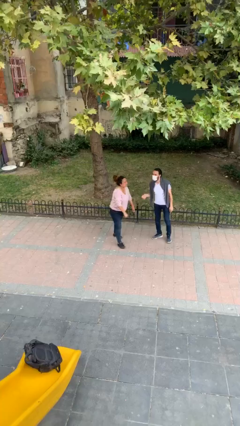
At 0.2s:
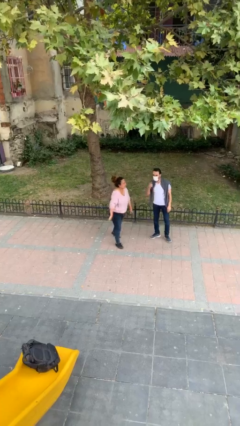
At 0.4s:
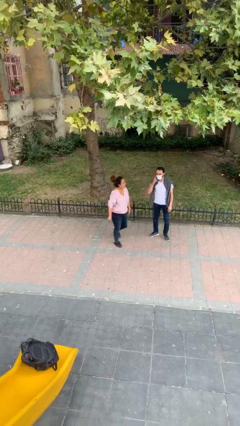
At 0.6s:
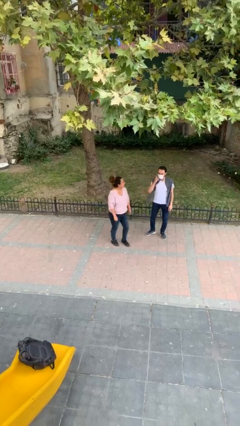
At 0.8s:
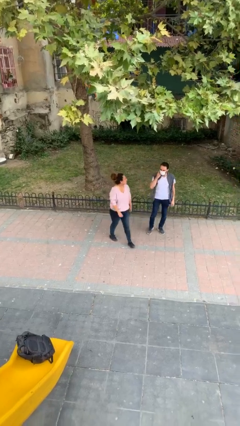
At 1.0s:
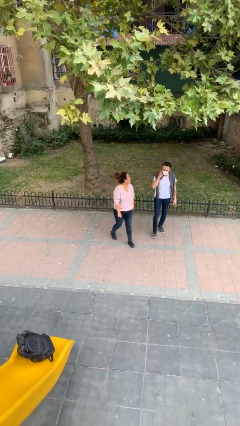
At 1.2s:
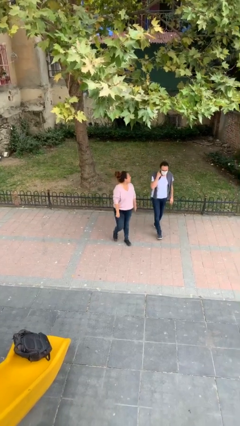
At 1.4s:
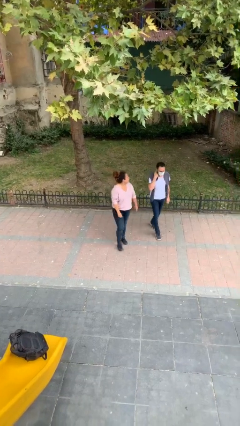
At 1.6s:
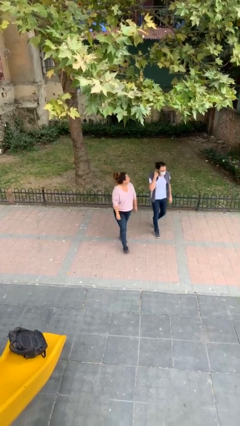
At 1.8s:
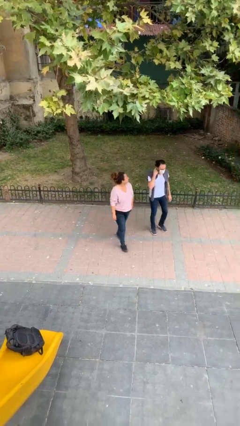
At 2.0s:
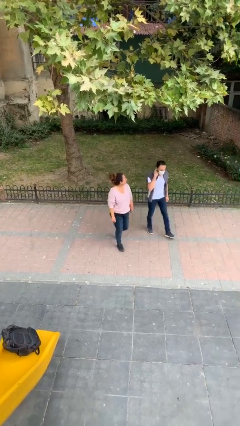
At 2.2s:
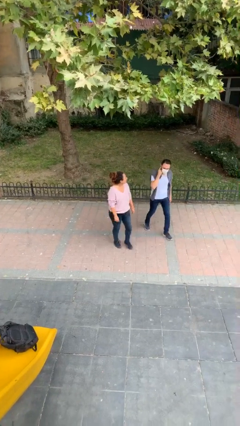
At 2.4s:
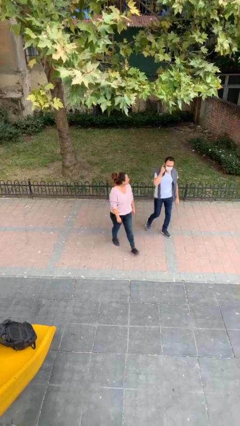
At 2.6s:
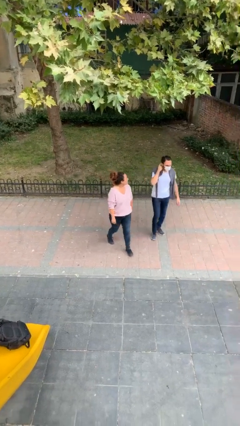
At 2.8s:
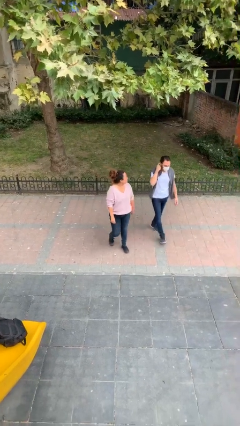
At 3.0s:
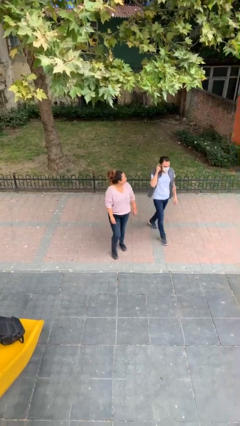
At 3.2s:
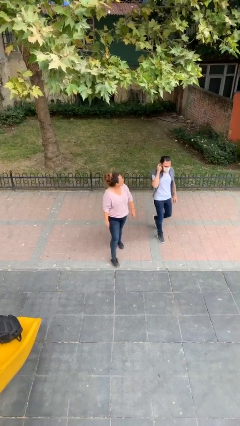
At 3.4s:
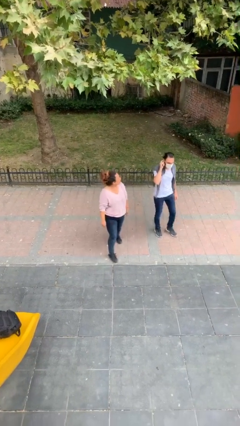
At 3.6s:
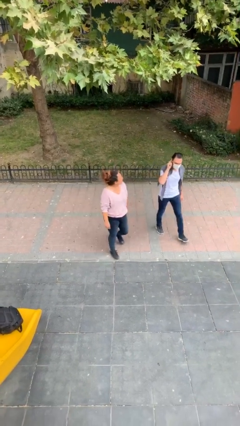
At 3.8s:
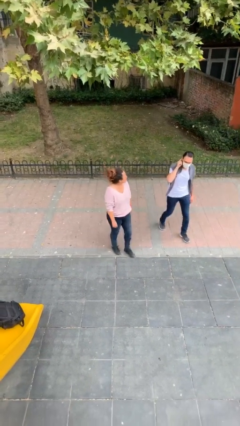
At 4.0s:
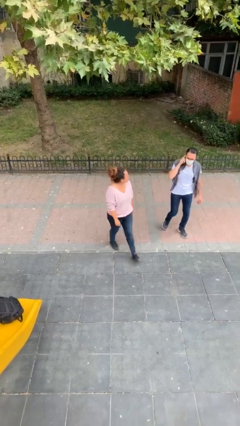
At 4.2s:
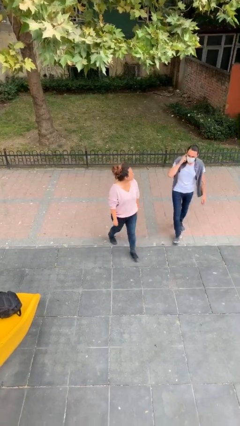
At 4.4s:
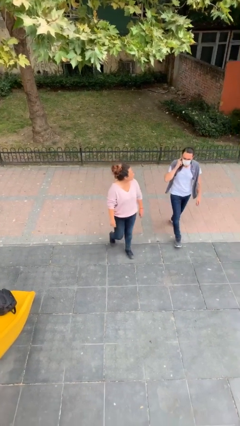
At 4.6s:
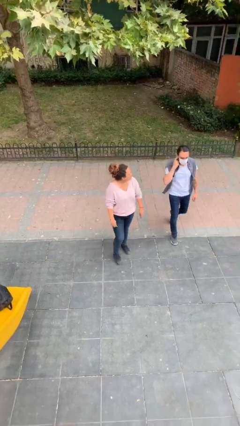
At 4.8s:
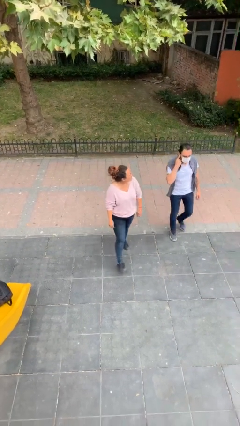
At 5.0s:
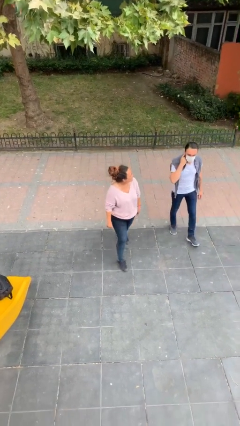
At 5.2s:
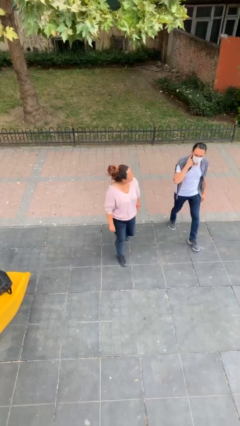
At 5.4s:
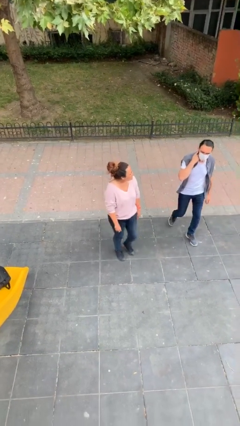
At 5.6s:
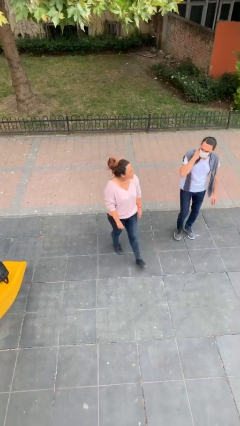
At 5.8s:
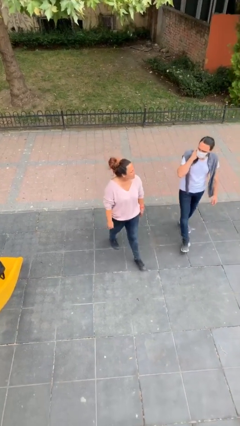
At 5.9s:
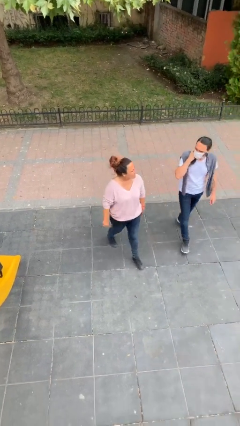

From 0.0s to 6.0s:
person talks to person

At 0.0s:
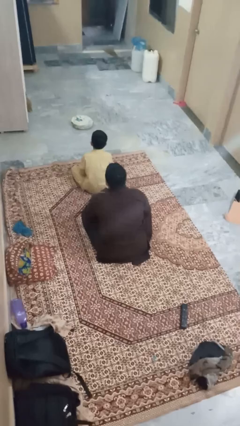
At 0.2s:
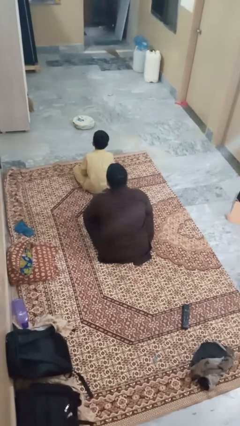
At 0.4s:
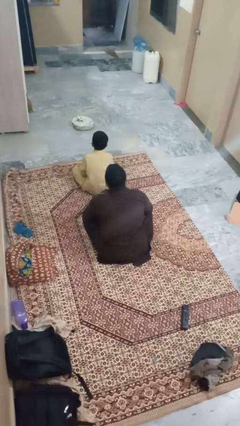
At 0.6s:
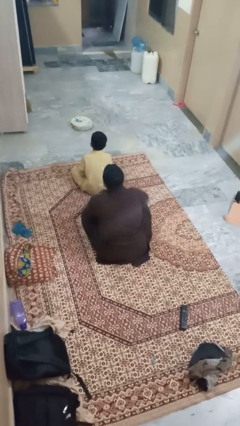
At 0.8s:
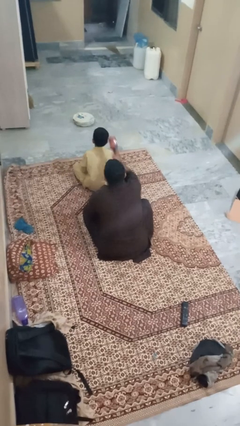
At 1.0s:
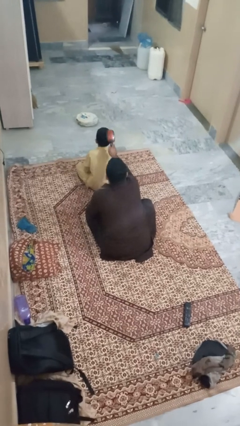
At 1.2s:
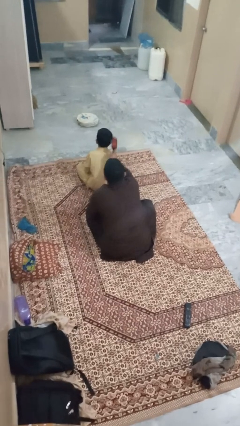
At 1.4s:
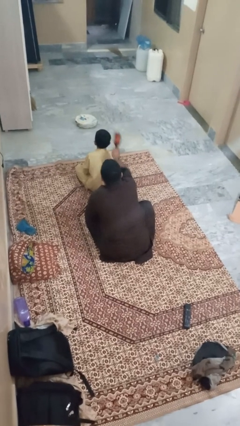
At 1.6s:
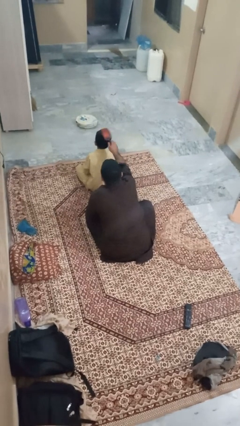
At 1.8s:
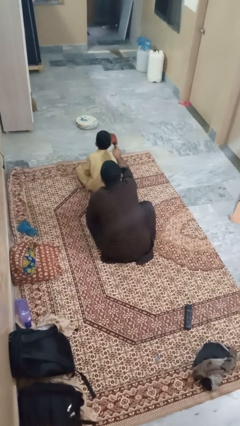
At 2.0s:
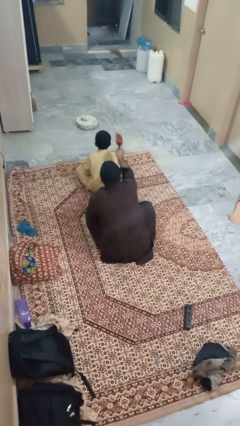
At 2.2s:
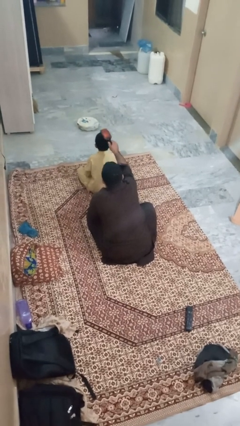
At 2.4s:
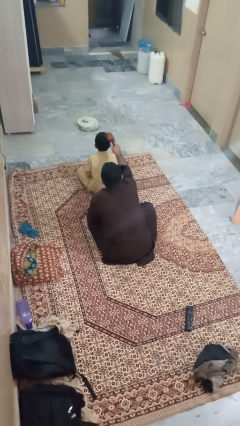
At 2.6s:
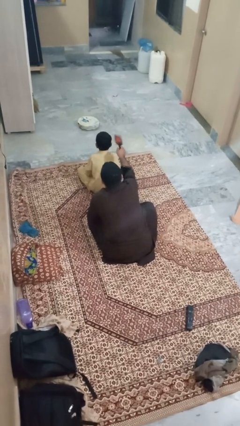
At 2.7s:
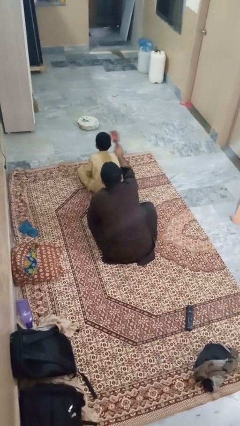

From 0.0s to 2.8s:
person brushes hair of person

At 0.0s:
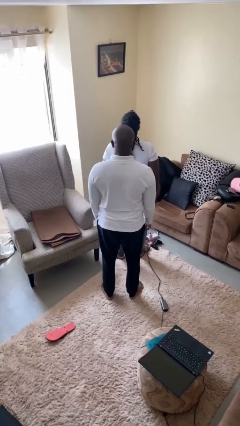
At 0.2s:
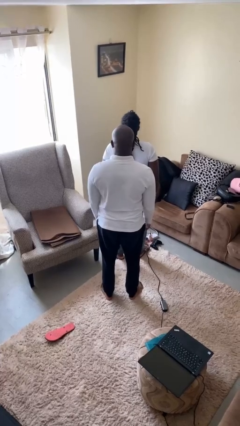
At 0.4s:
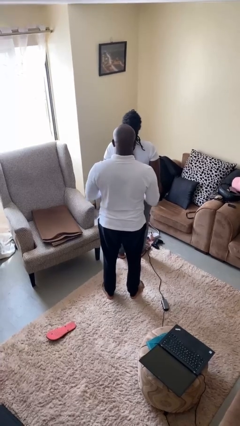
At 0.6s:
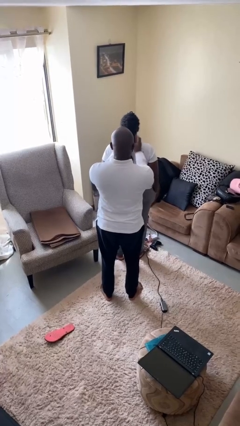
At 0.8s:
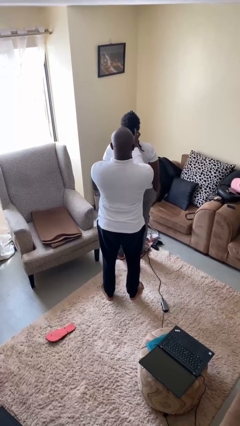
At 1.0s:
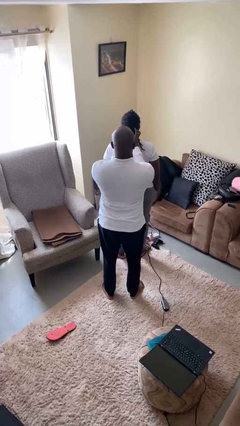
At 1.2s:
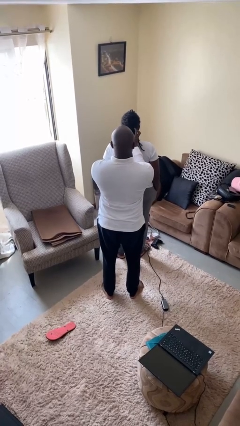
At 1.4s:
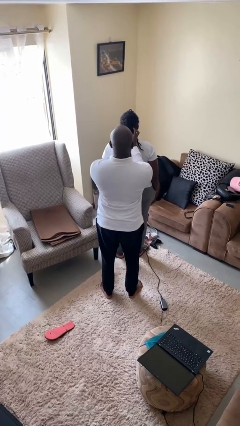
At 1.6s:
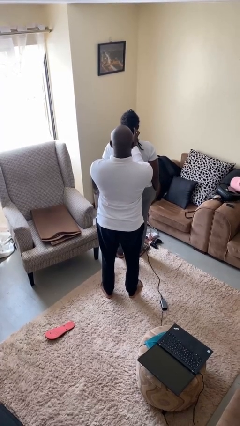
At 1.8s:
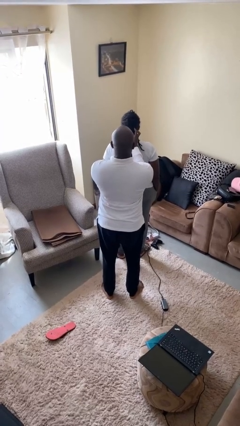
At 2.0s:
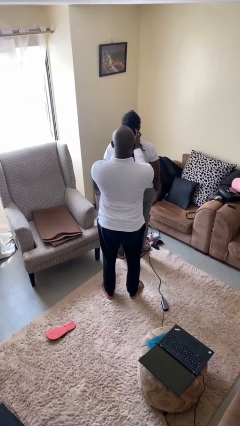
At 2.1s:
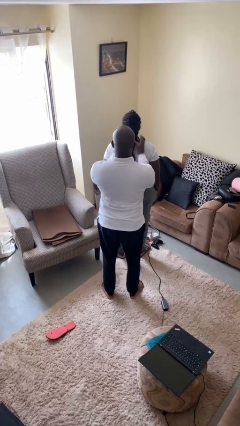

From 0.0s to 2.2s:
person grabs person by hair

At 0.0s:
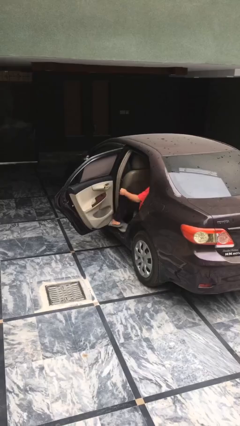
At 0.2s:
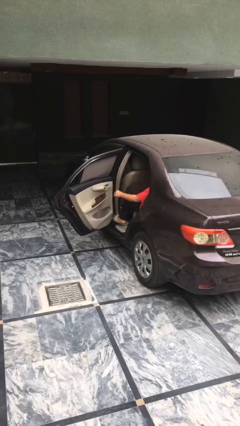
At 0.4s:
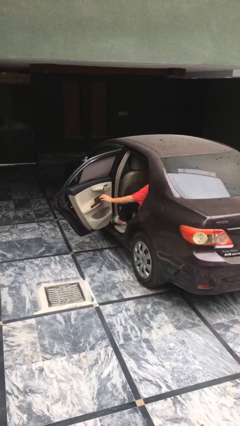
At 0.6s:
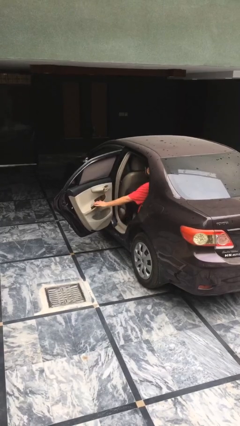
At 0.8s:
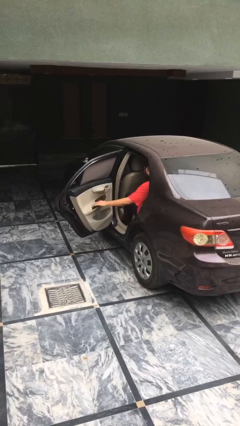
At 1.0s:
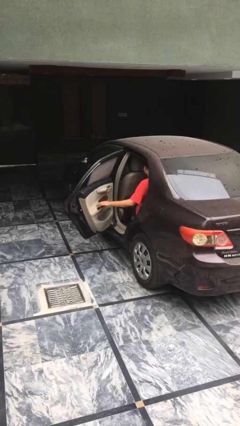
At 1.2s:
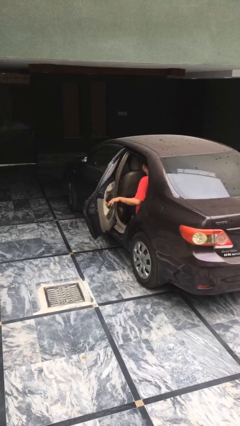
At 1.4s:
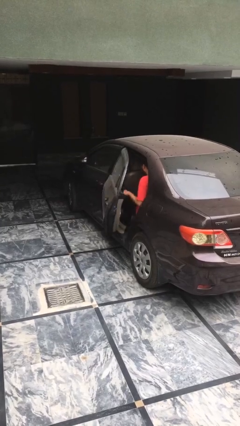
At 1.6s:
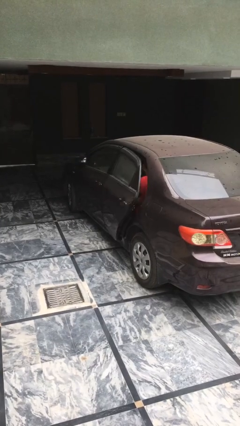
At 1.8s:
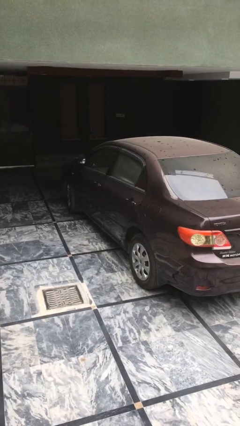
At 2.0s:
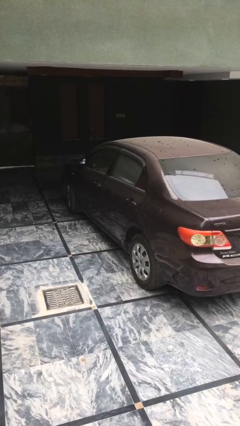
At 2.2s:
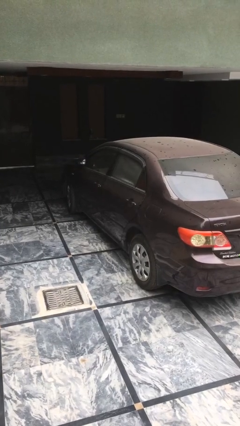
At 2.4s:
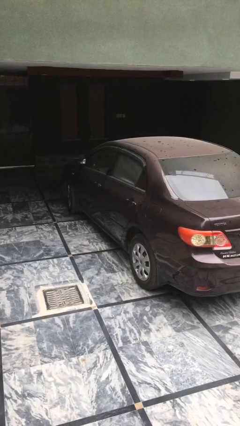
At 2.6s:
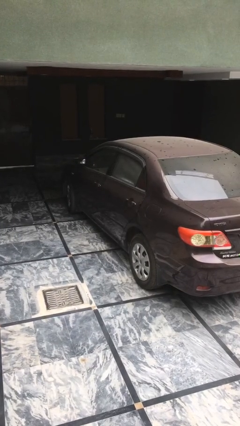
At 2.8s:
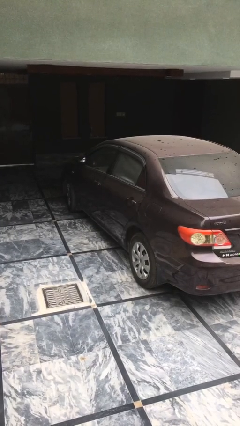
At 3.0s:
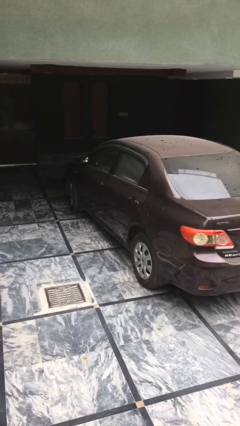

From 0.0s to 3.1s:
person closes car door

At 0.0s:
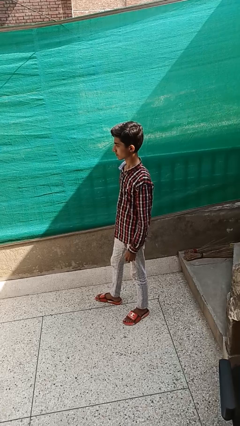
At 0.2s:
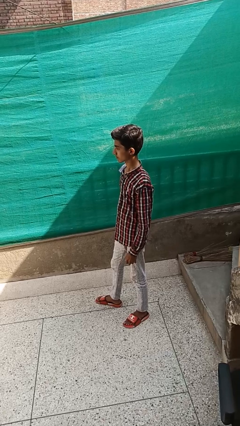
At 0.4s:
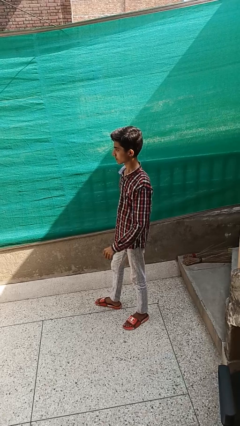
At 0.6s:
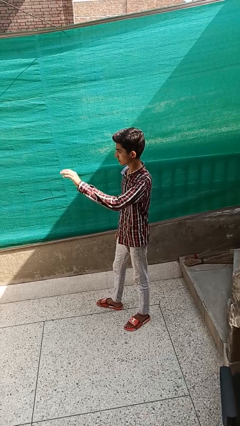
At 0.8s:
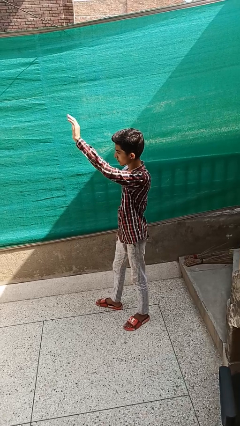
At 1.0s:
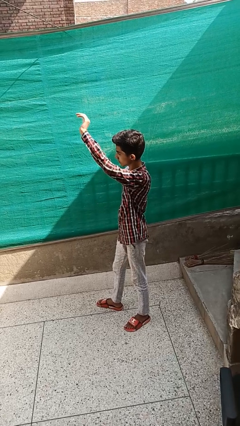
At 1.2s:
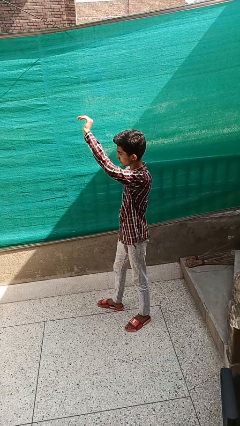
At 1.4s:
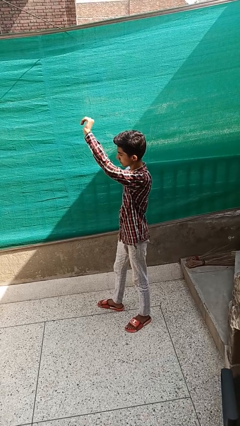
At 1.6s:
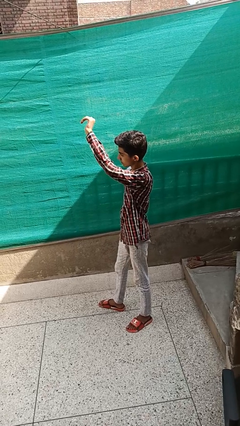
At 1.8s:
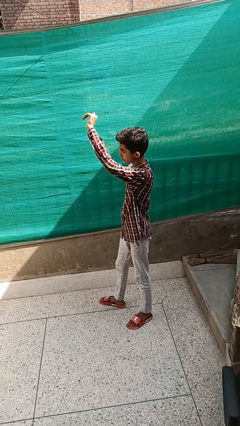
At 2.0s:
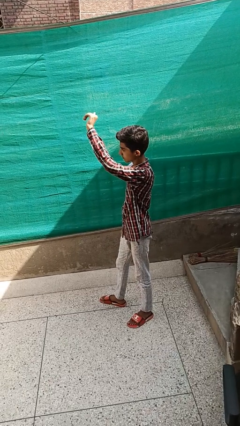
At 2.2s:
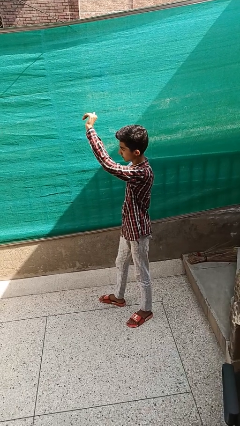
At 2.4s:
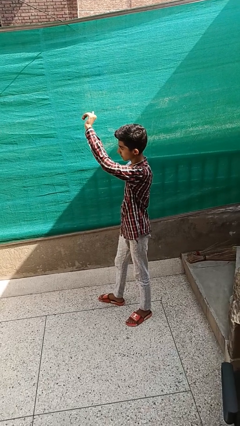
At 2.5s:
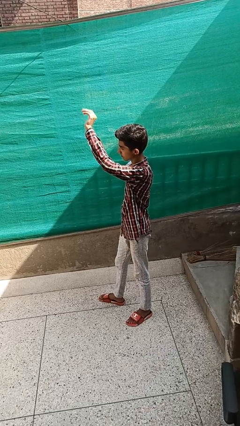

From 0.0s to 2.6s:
person gestures come here

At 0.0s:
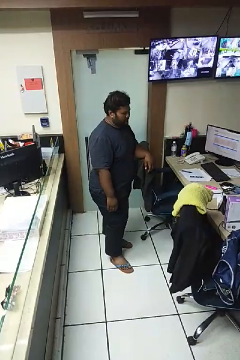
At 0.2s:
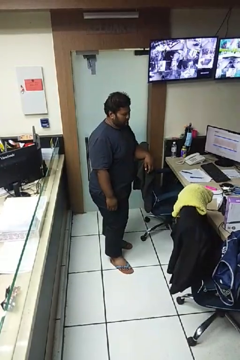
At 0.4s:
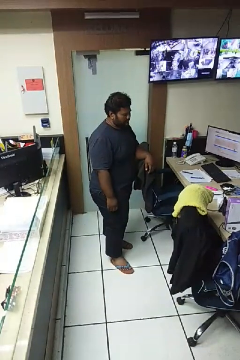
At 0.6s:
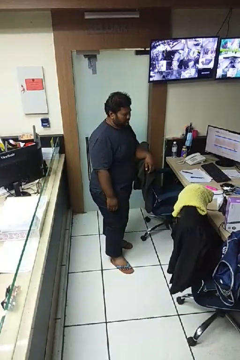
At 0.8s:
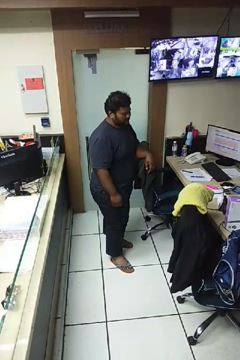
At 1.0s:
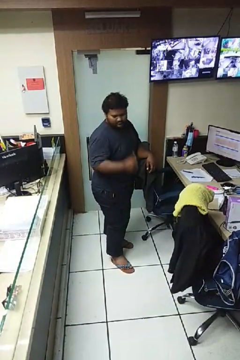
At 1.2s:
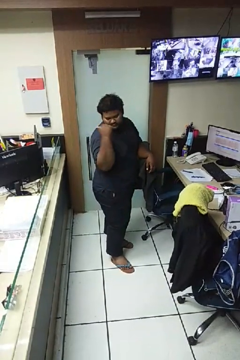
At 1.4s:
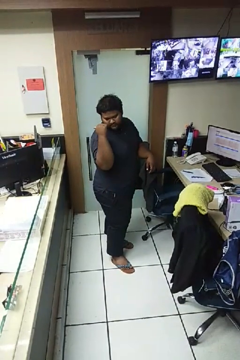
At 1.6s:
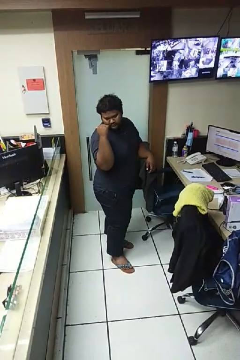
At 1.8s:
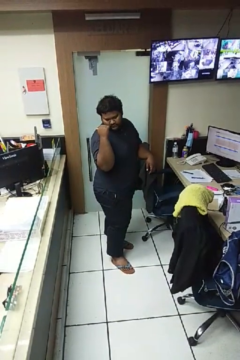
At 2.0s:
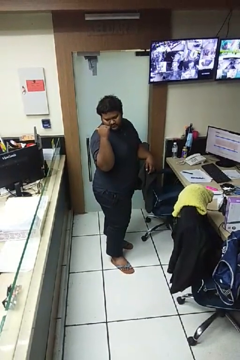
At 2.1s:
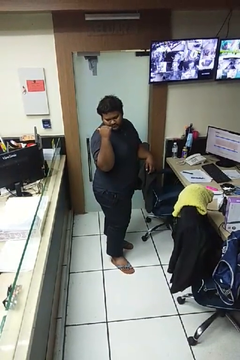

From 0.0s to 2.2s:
person gestures behind me
